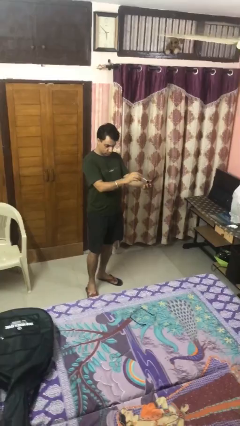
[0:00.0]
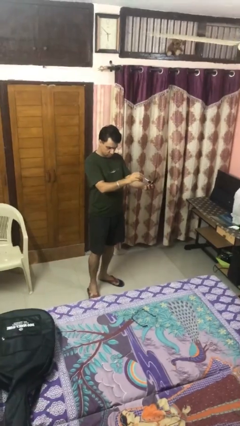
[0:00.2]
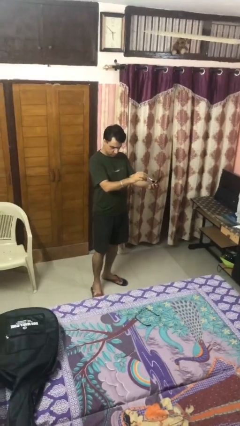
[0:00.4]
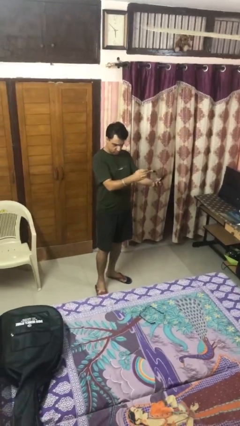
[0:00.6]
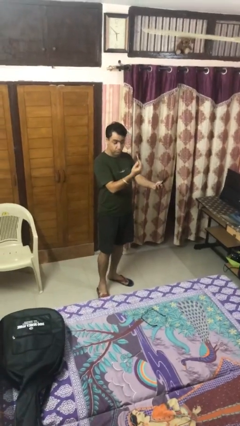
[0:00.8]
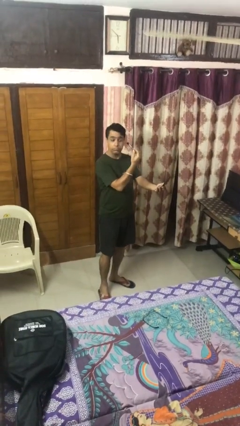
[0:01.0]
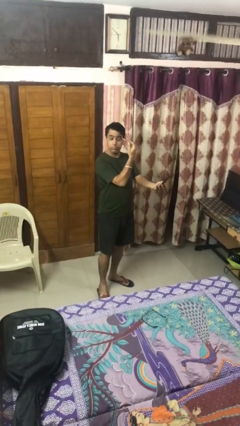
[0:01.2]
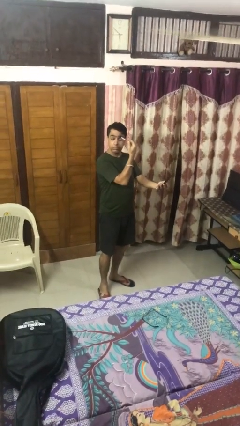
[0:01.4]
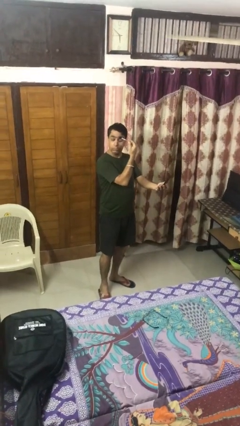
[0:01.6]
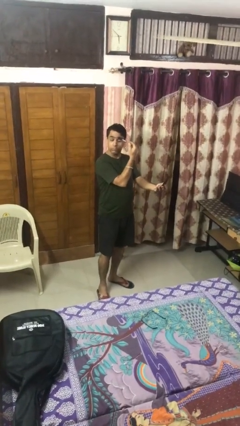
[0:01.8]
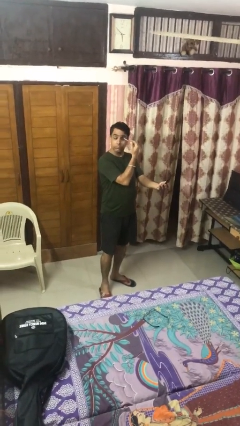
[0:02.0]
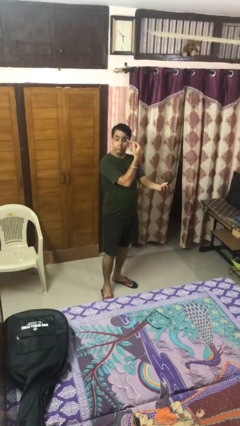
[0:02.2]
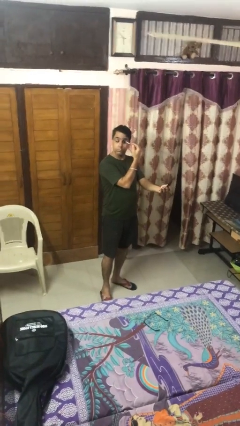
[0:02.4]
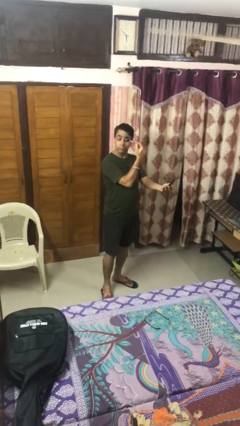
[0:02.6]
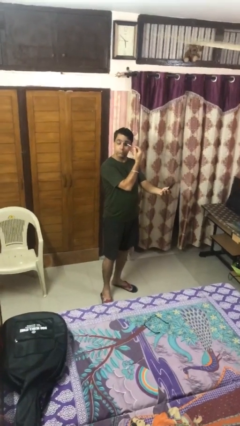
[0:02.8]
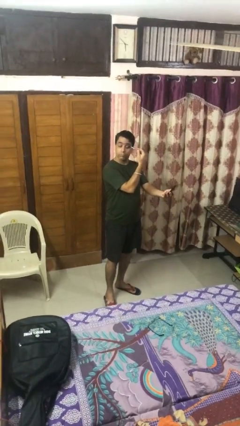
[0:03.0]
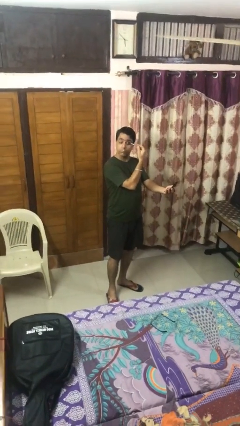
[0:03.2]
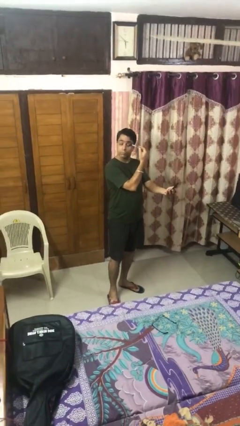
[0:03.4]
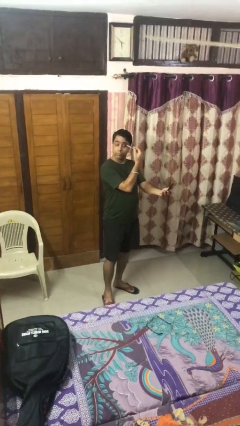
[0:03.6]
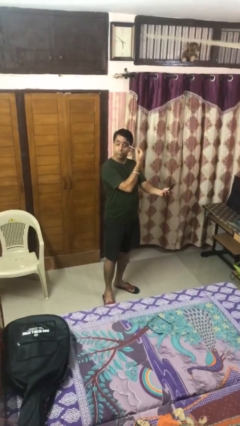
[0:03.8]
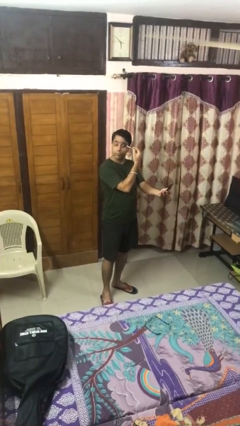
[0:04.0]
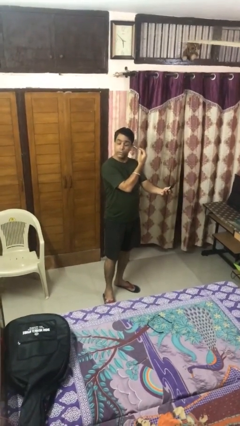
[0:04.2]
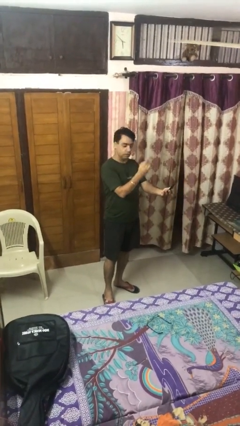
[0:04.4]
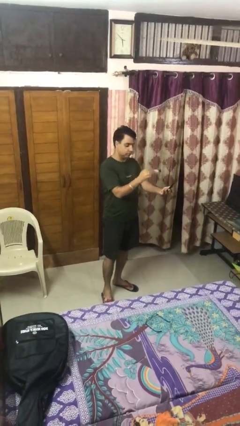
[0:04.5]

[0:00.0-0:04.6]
person applies eye makeup

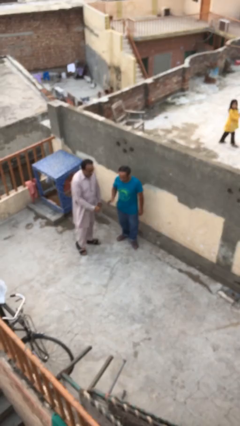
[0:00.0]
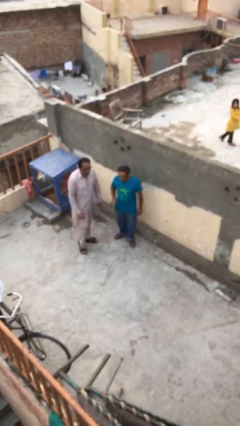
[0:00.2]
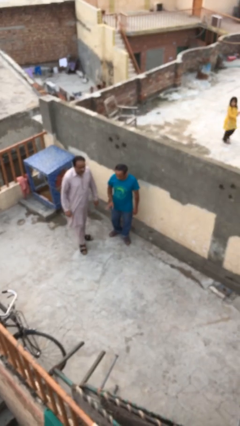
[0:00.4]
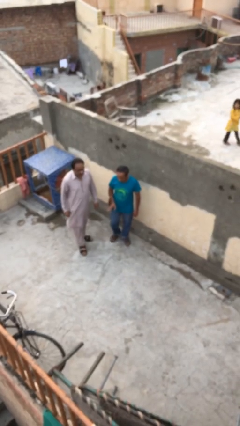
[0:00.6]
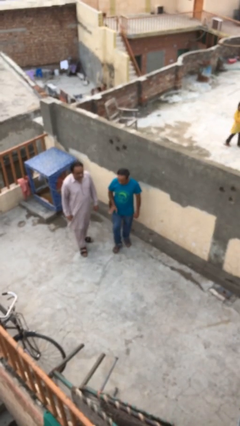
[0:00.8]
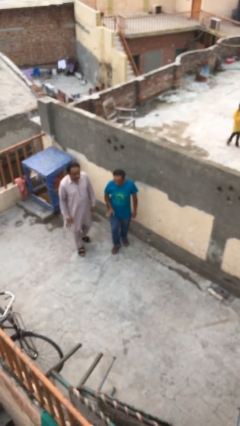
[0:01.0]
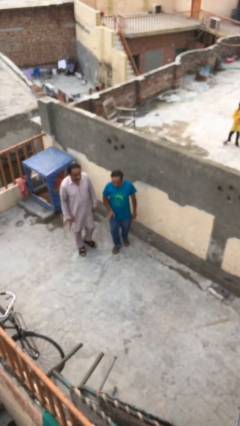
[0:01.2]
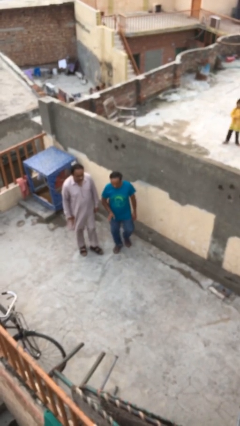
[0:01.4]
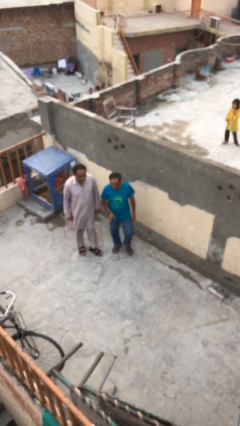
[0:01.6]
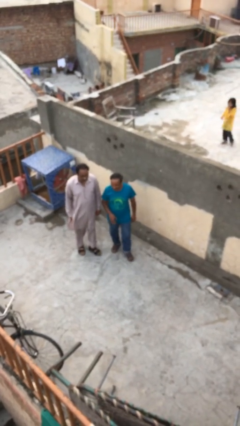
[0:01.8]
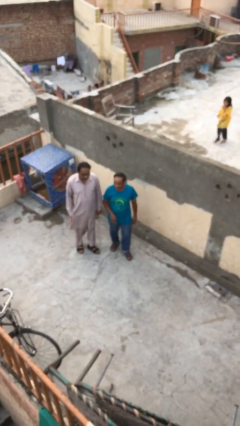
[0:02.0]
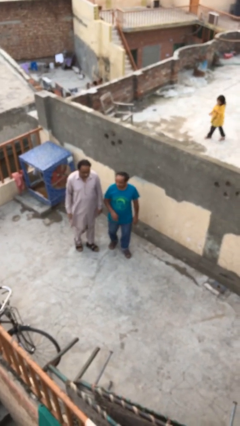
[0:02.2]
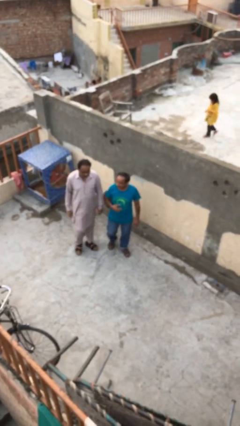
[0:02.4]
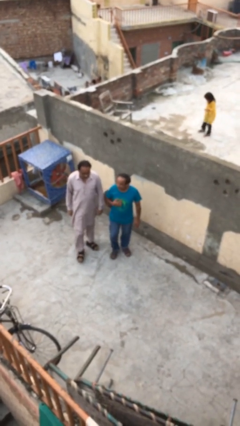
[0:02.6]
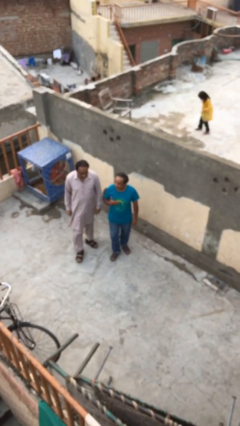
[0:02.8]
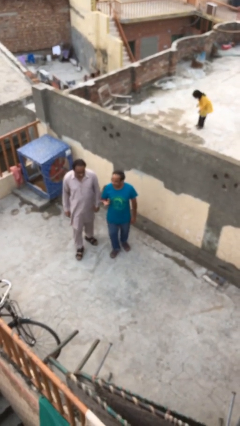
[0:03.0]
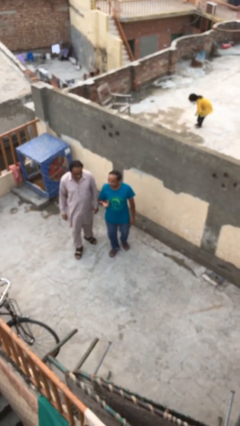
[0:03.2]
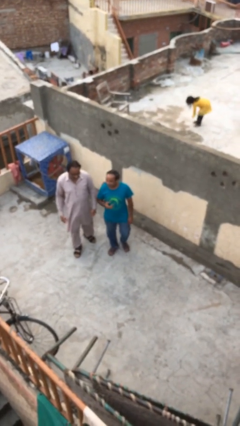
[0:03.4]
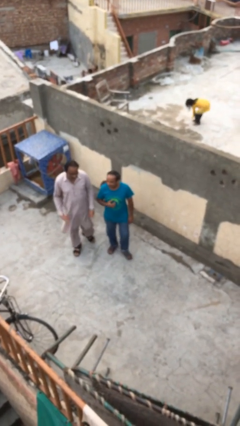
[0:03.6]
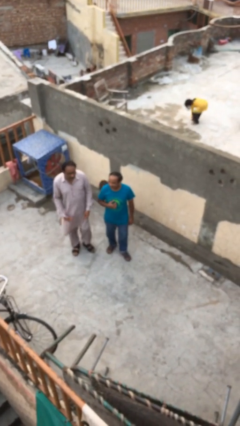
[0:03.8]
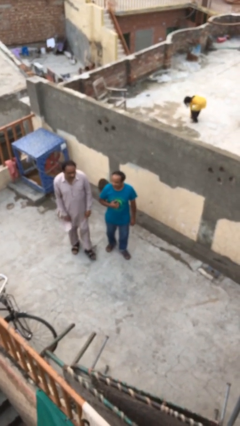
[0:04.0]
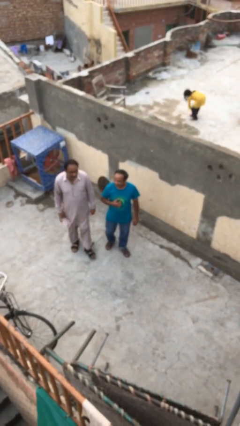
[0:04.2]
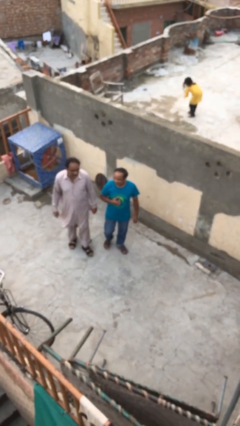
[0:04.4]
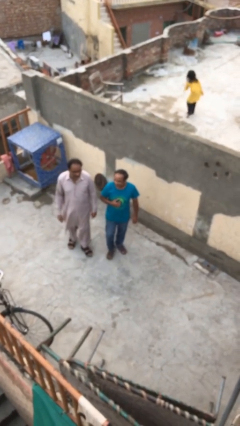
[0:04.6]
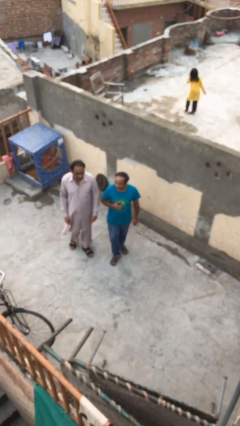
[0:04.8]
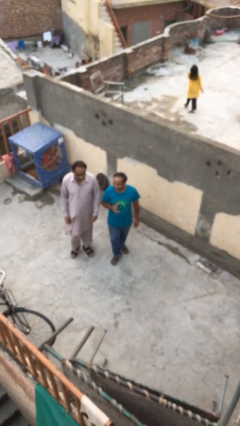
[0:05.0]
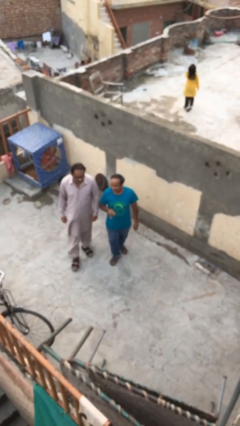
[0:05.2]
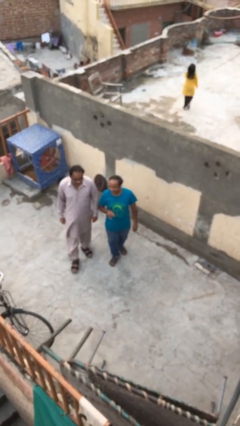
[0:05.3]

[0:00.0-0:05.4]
person talks to person

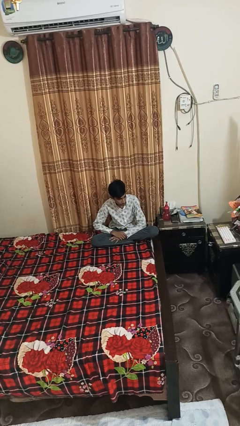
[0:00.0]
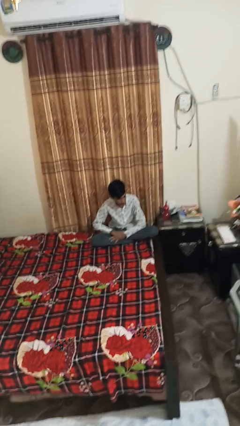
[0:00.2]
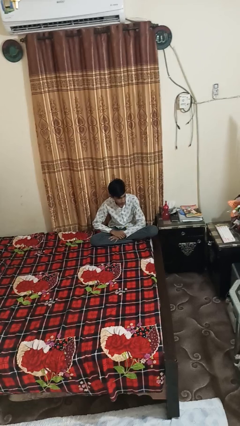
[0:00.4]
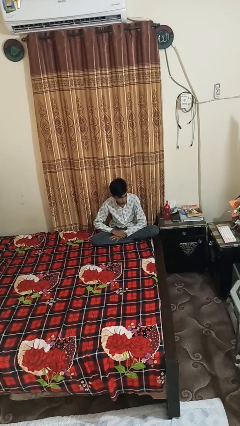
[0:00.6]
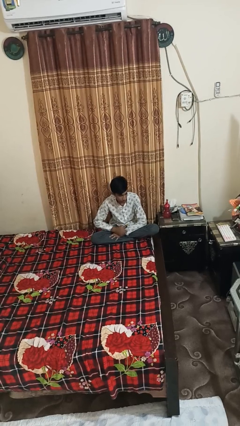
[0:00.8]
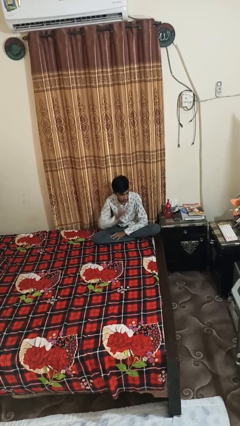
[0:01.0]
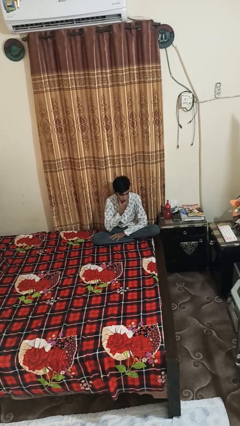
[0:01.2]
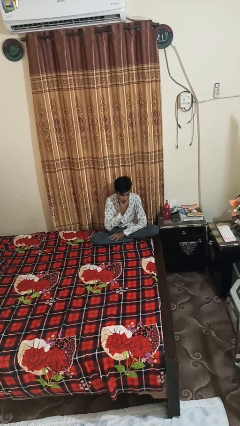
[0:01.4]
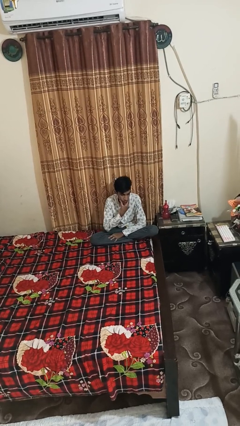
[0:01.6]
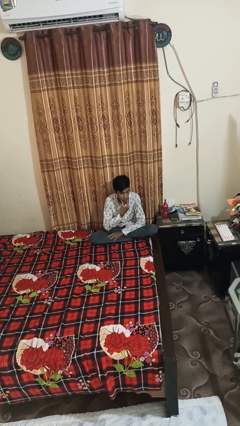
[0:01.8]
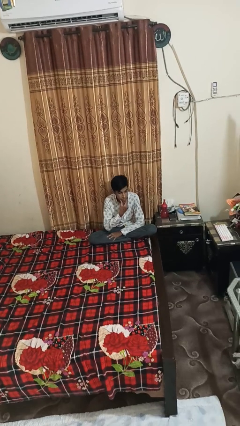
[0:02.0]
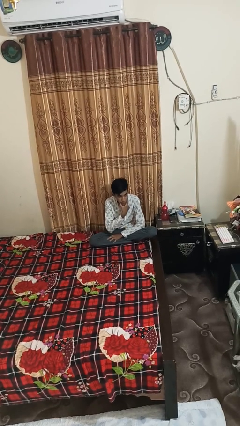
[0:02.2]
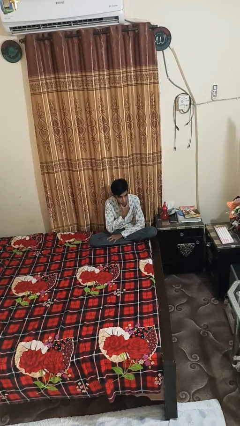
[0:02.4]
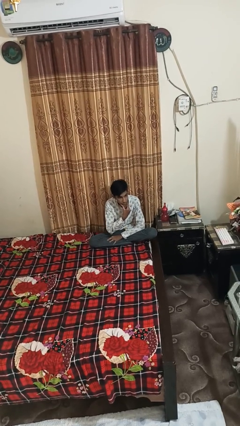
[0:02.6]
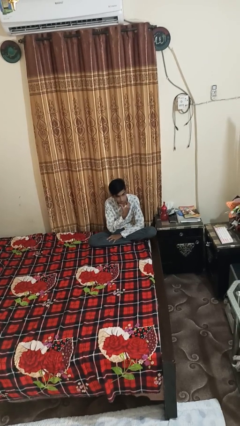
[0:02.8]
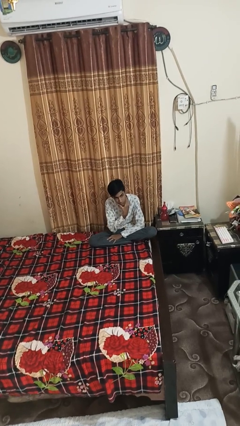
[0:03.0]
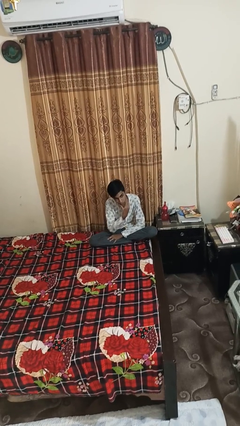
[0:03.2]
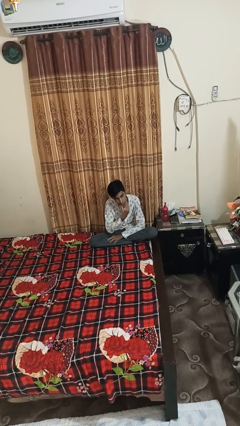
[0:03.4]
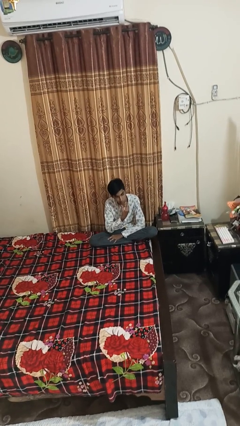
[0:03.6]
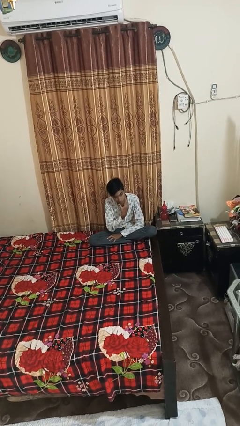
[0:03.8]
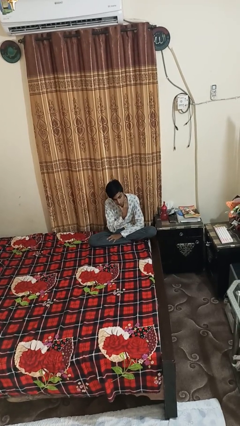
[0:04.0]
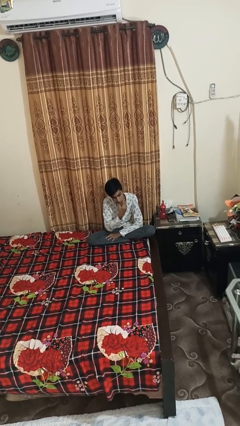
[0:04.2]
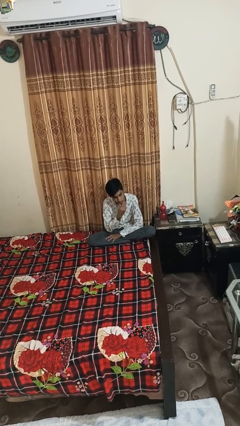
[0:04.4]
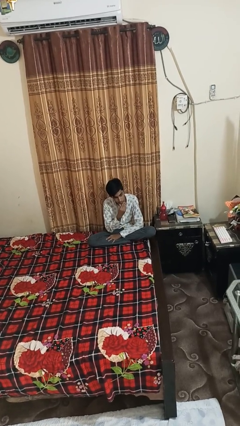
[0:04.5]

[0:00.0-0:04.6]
person strokes chin

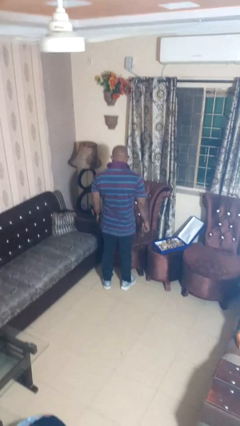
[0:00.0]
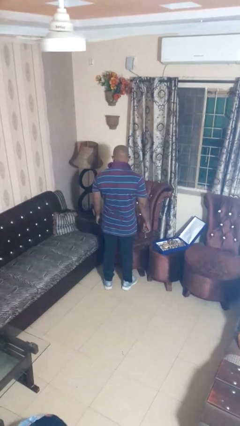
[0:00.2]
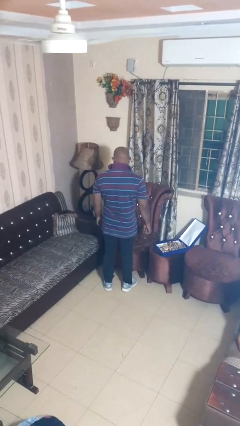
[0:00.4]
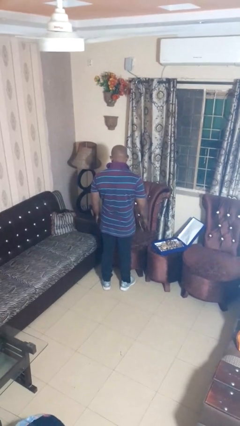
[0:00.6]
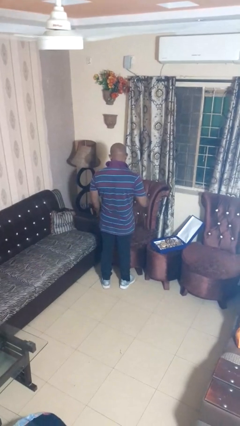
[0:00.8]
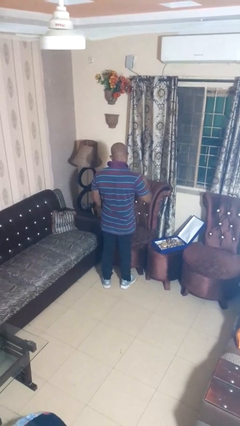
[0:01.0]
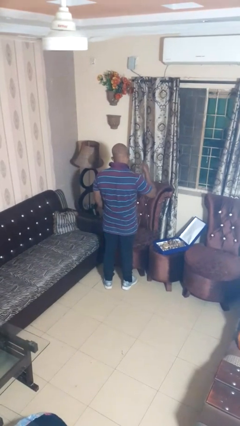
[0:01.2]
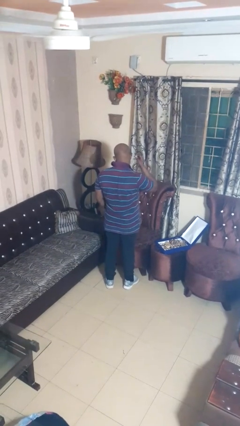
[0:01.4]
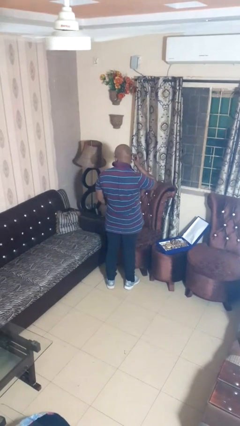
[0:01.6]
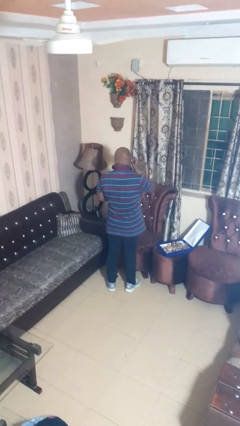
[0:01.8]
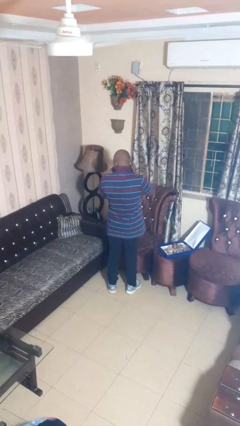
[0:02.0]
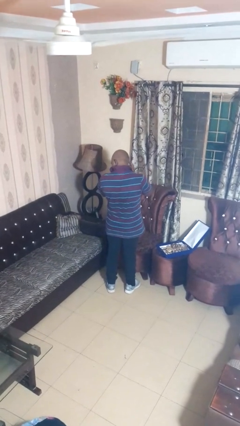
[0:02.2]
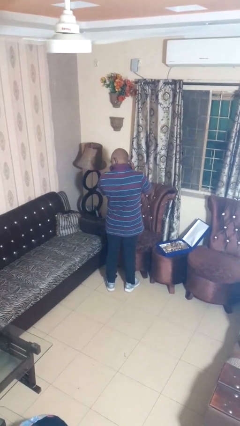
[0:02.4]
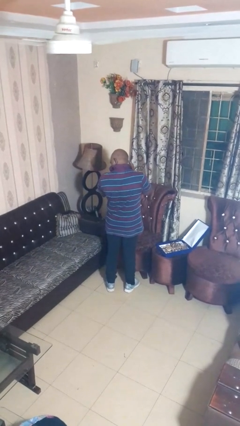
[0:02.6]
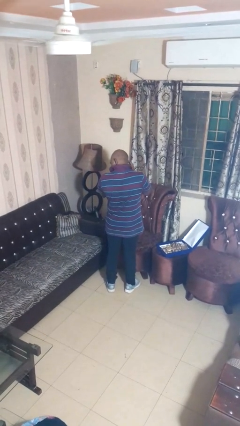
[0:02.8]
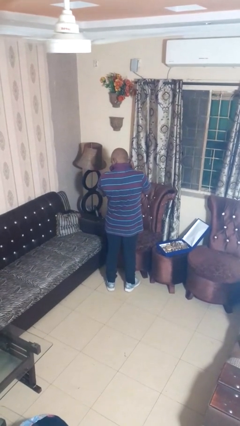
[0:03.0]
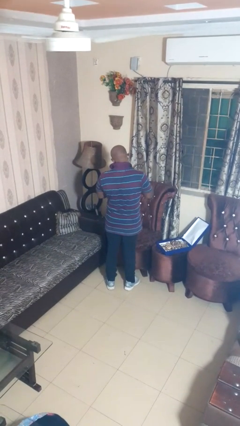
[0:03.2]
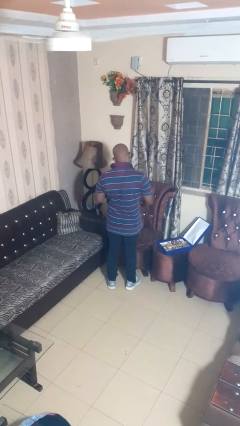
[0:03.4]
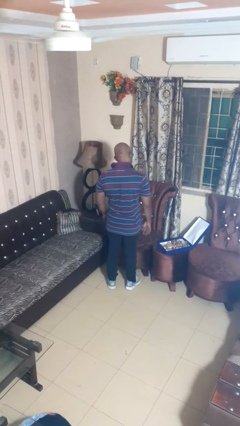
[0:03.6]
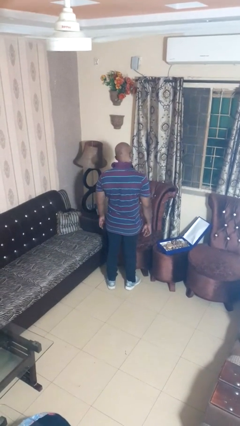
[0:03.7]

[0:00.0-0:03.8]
person puts on earrings
